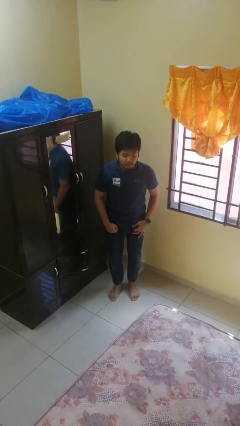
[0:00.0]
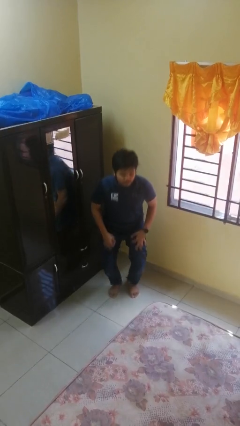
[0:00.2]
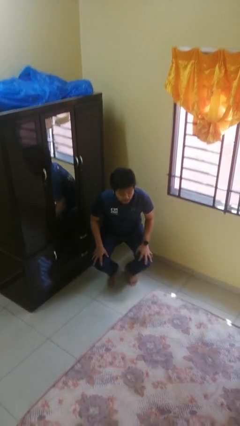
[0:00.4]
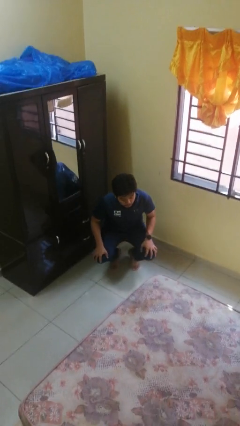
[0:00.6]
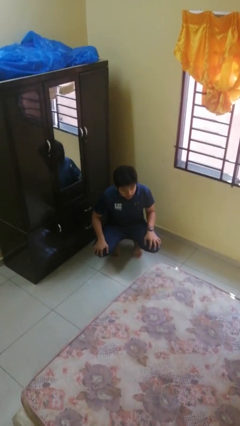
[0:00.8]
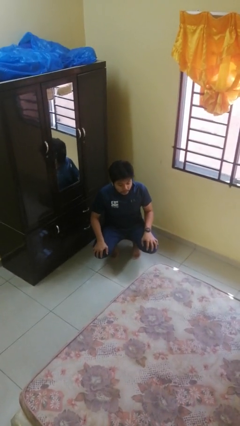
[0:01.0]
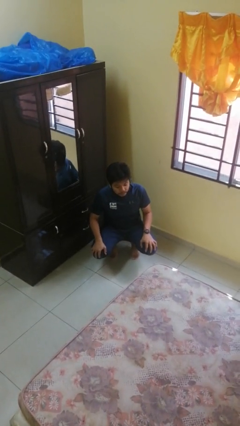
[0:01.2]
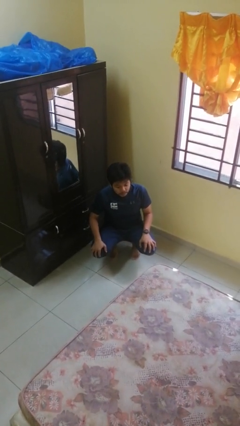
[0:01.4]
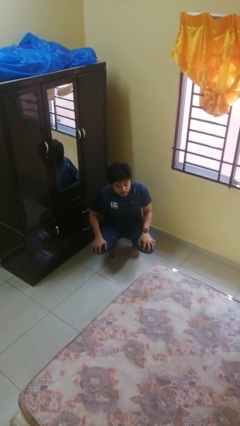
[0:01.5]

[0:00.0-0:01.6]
person squats

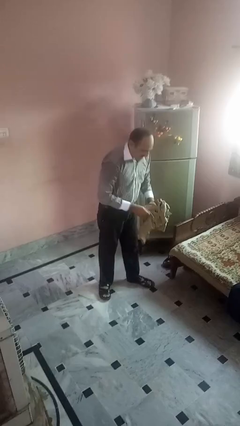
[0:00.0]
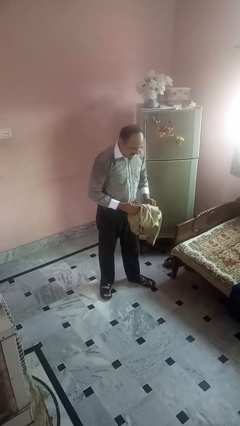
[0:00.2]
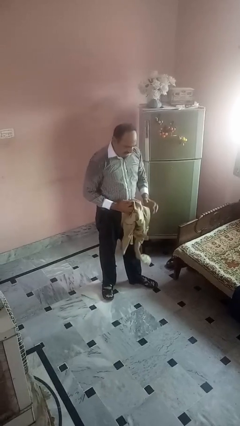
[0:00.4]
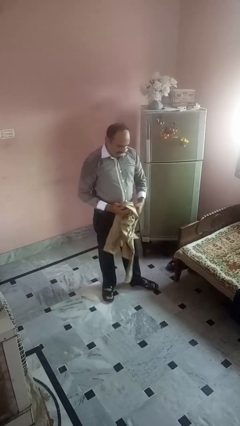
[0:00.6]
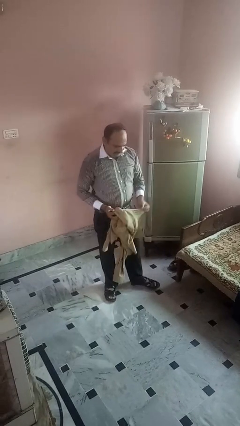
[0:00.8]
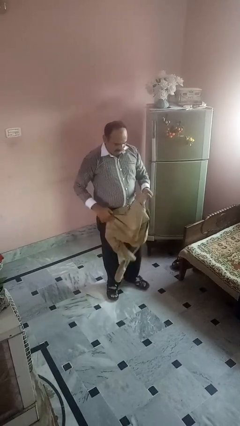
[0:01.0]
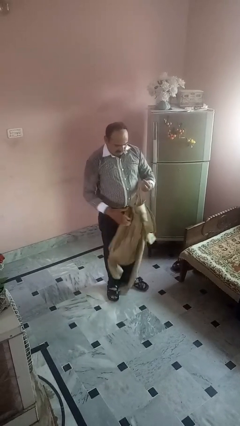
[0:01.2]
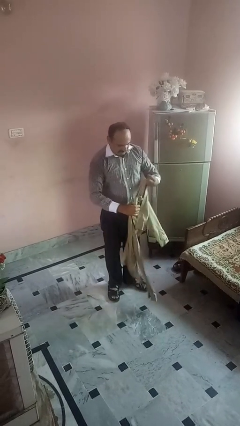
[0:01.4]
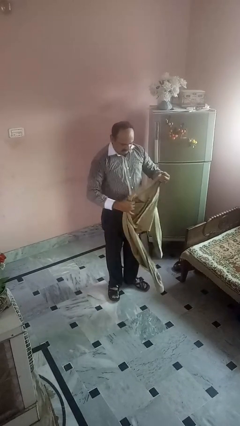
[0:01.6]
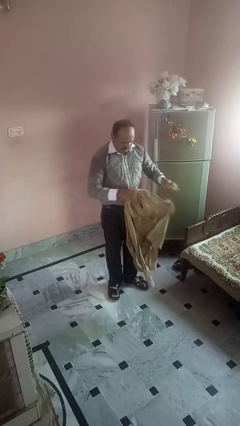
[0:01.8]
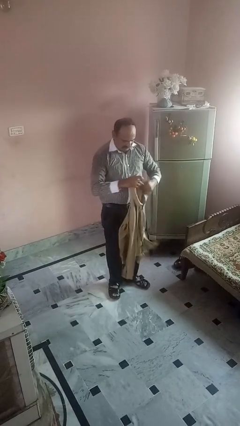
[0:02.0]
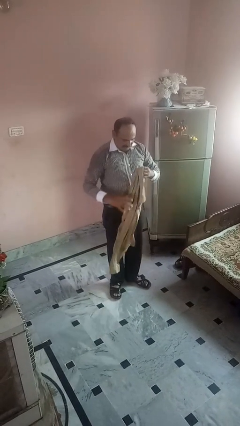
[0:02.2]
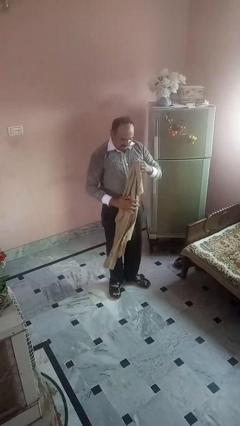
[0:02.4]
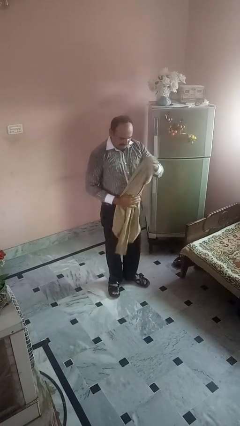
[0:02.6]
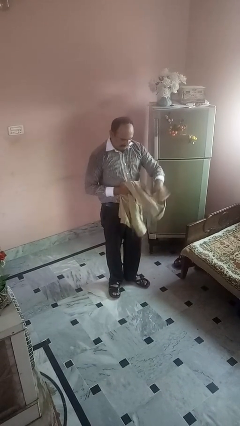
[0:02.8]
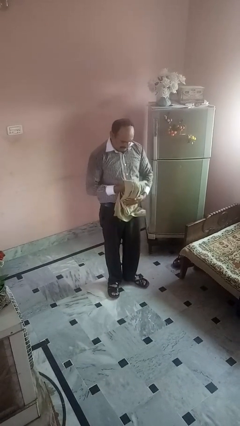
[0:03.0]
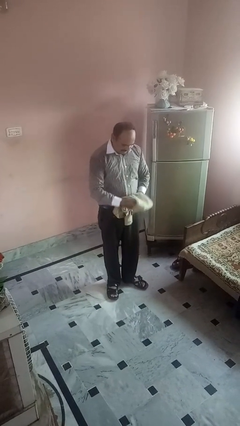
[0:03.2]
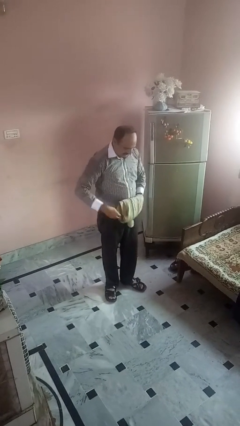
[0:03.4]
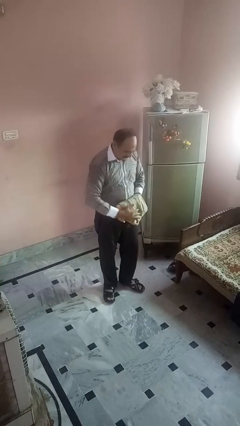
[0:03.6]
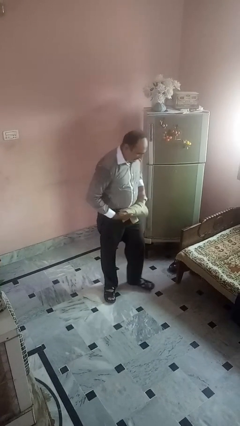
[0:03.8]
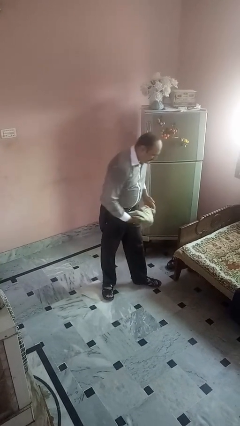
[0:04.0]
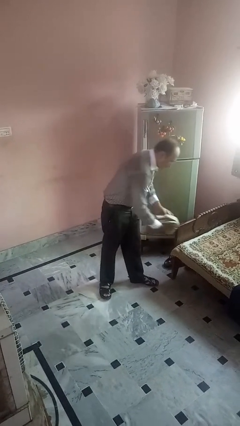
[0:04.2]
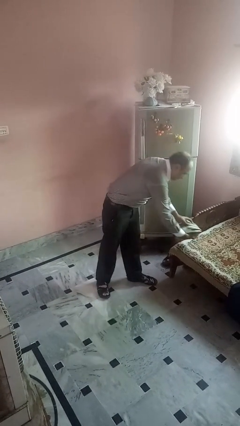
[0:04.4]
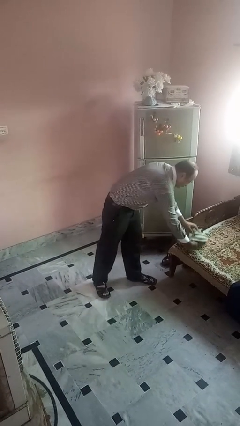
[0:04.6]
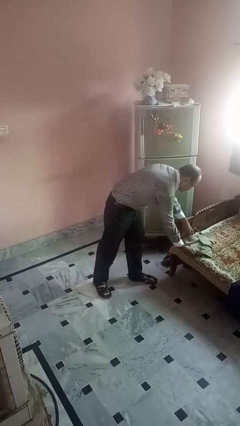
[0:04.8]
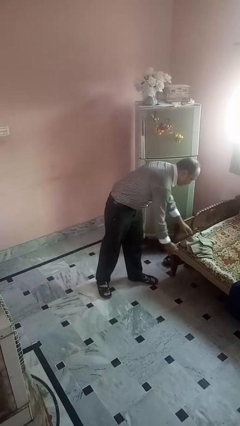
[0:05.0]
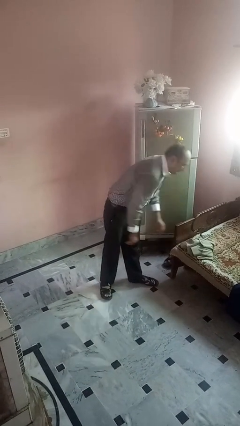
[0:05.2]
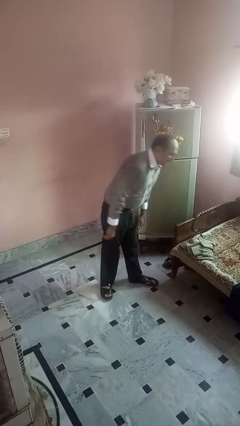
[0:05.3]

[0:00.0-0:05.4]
person folds shirt

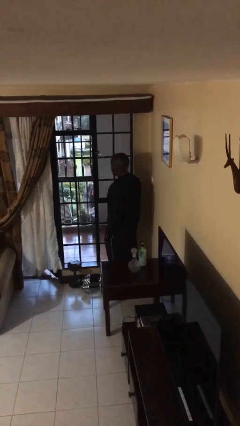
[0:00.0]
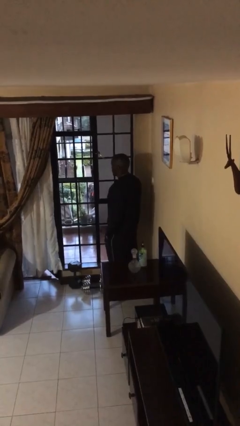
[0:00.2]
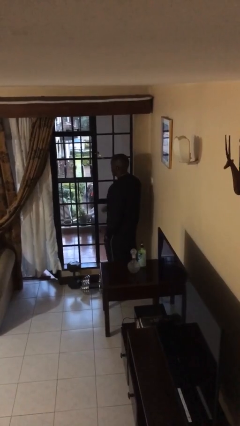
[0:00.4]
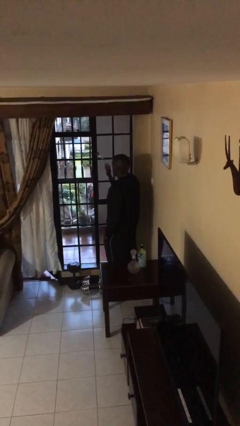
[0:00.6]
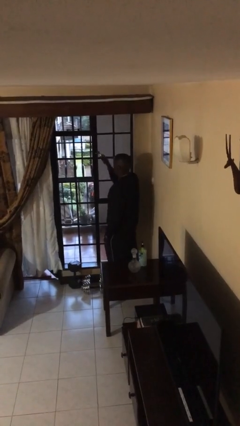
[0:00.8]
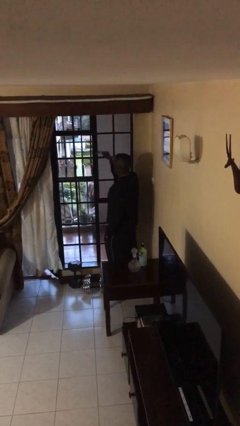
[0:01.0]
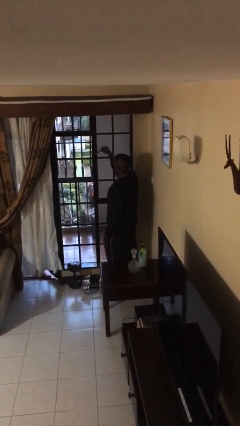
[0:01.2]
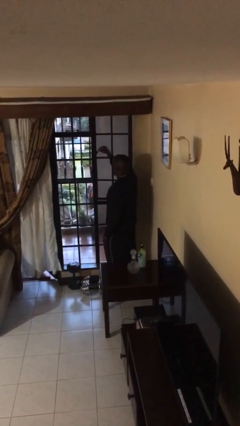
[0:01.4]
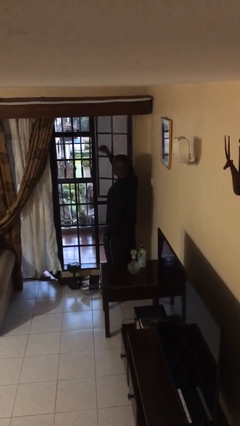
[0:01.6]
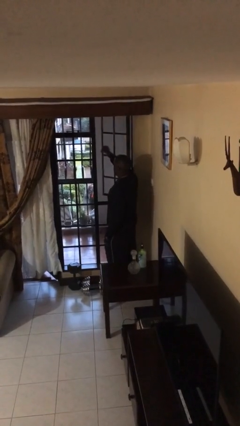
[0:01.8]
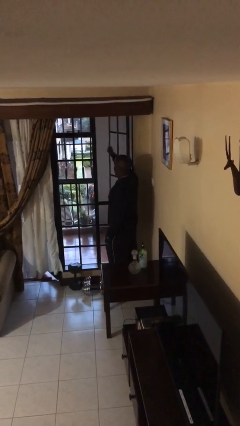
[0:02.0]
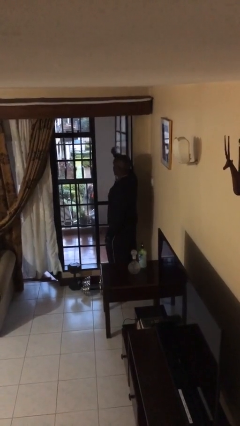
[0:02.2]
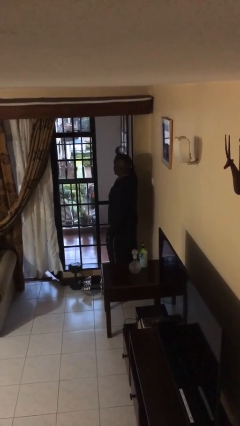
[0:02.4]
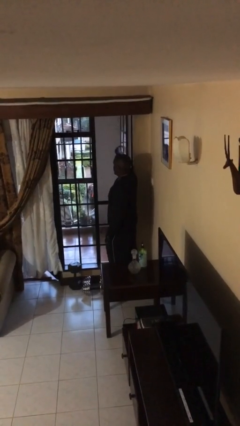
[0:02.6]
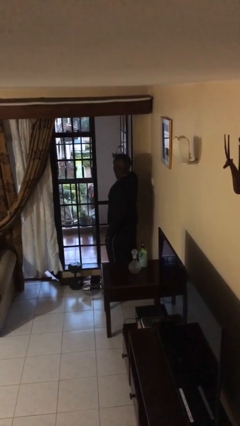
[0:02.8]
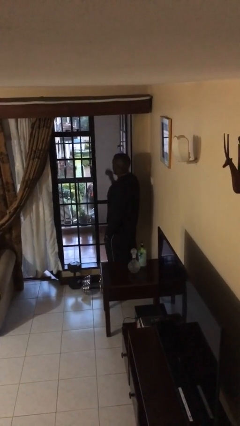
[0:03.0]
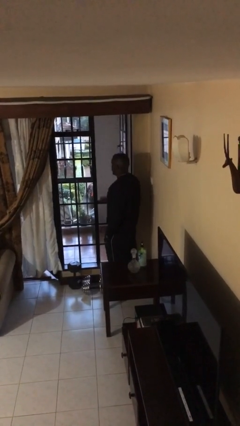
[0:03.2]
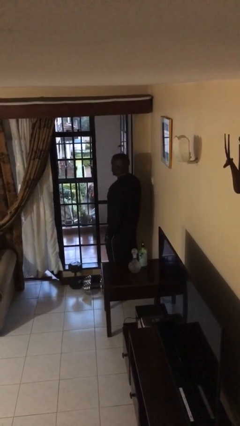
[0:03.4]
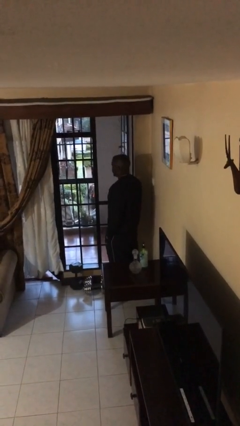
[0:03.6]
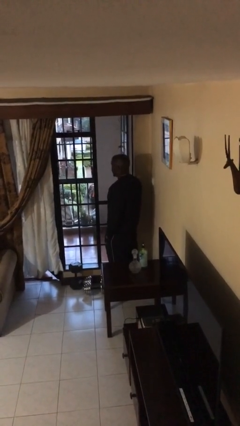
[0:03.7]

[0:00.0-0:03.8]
person opens home window

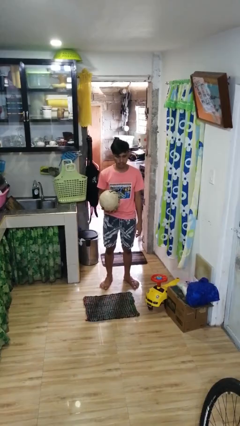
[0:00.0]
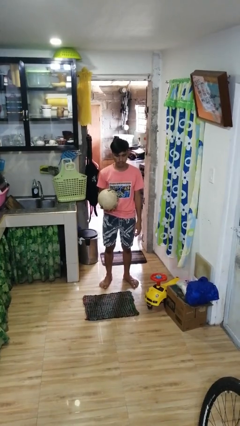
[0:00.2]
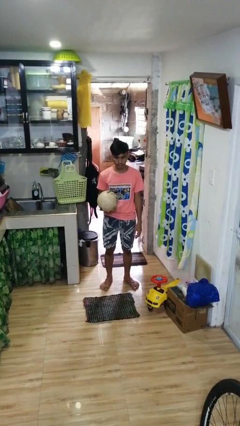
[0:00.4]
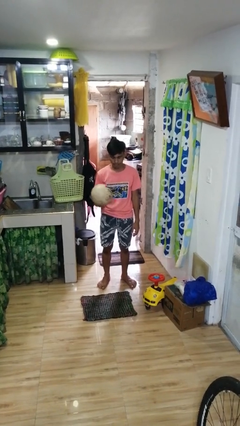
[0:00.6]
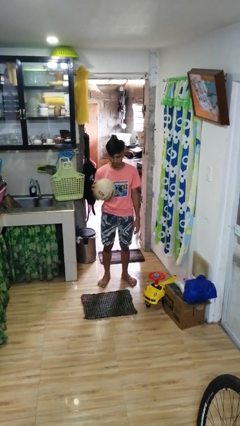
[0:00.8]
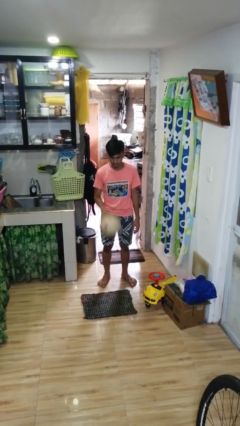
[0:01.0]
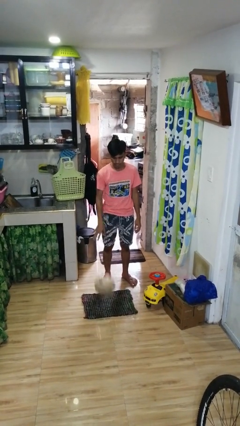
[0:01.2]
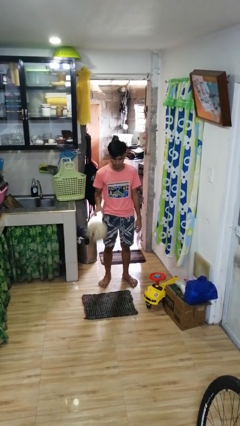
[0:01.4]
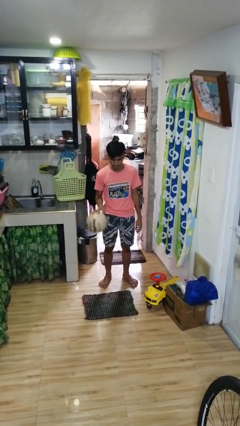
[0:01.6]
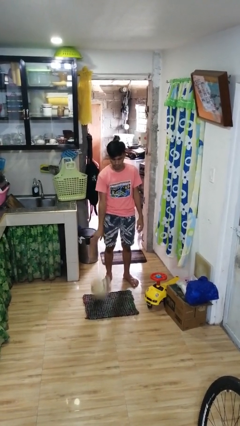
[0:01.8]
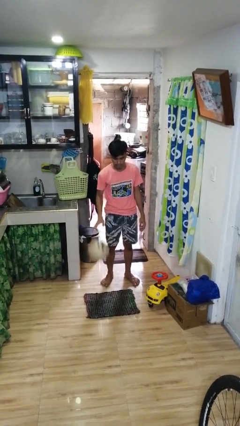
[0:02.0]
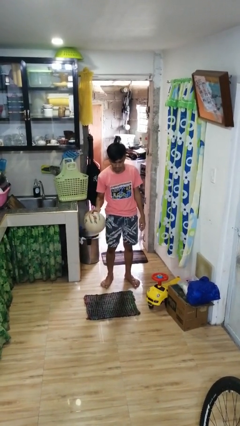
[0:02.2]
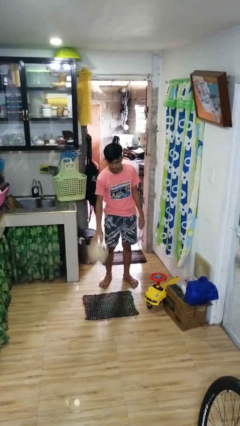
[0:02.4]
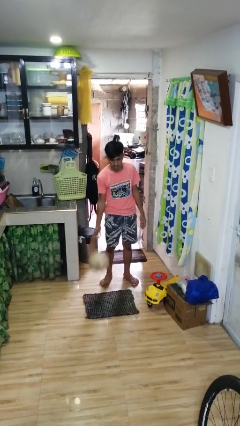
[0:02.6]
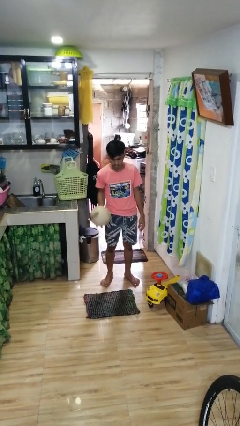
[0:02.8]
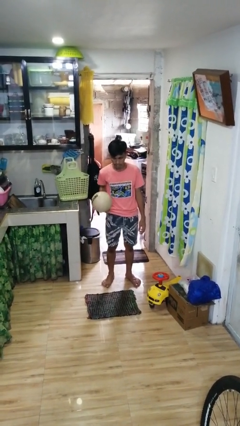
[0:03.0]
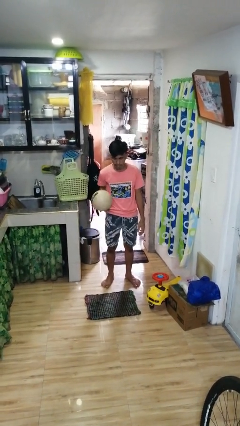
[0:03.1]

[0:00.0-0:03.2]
person bounces ball on floor

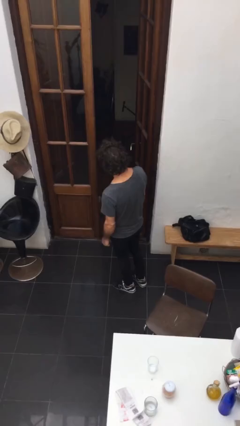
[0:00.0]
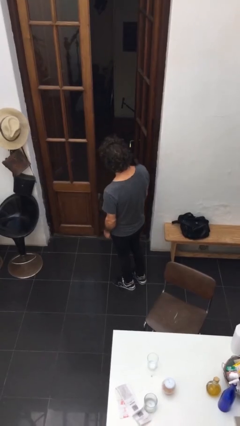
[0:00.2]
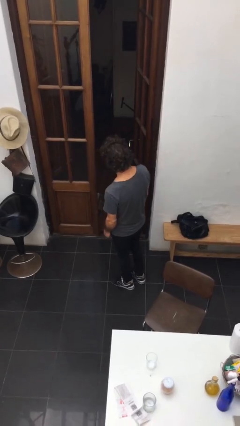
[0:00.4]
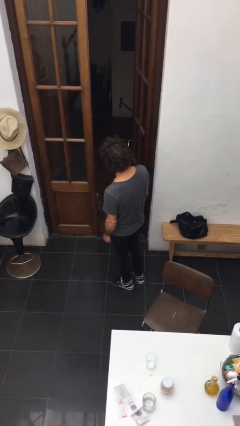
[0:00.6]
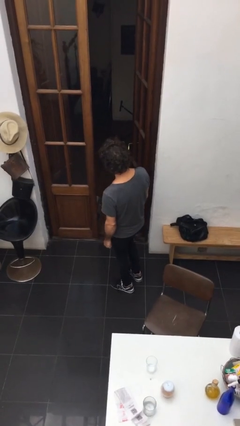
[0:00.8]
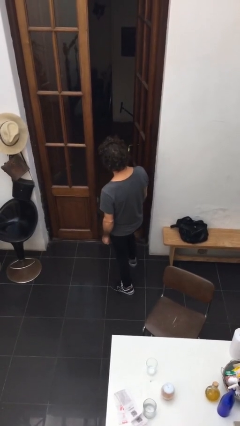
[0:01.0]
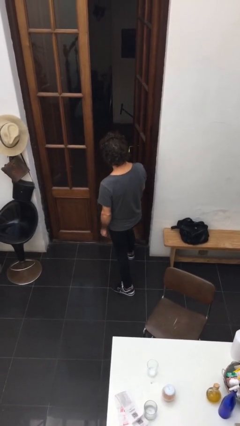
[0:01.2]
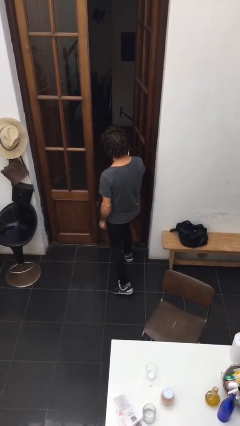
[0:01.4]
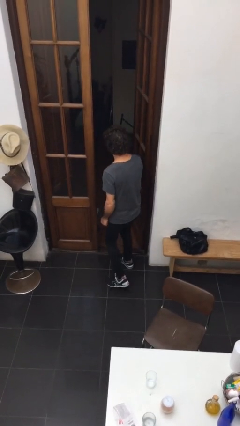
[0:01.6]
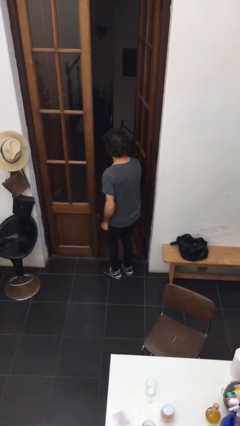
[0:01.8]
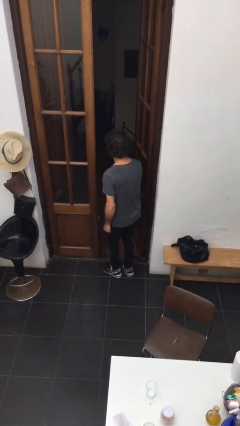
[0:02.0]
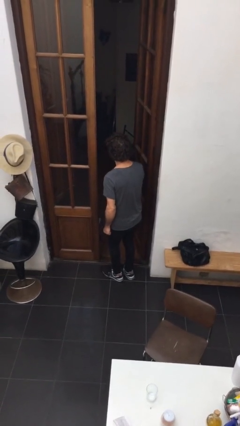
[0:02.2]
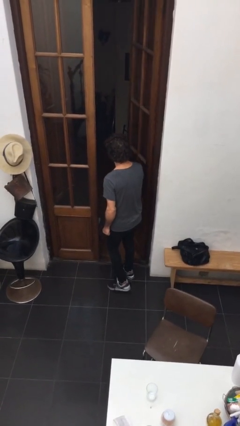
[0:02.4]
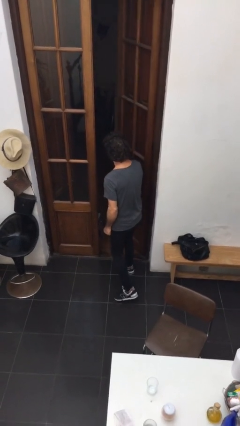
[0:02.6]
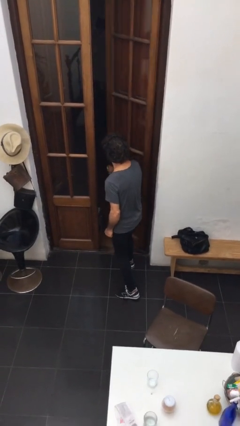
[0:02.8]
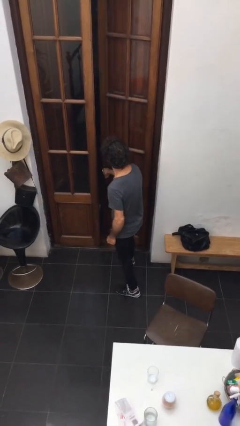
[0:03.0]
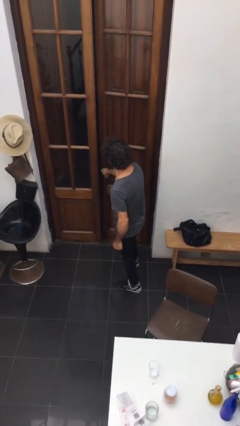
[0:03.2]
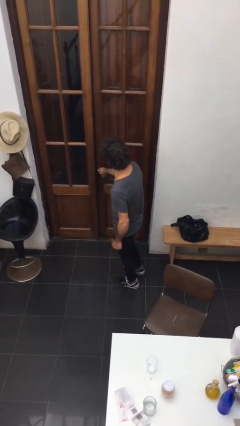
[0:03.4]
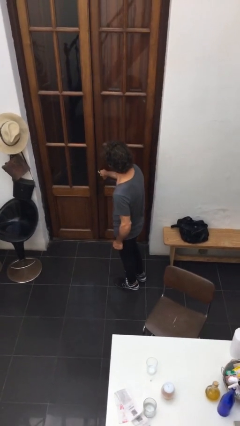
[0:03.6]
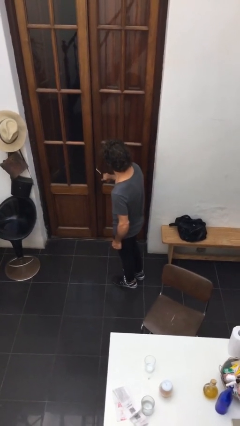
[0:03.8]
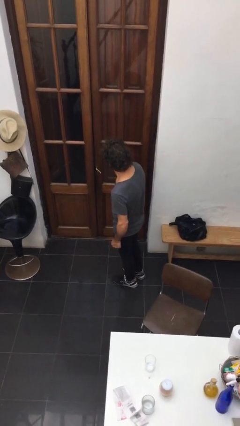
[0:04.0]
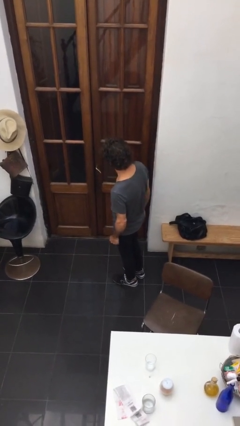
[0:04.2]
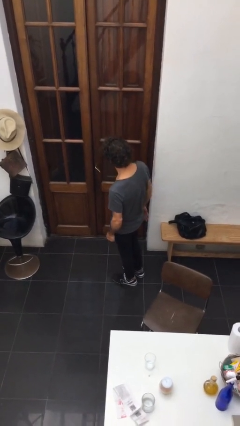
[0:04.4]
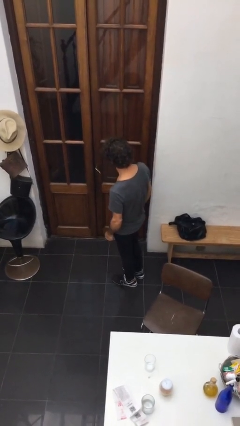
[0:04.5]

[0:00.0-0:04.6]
person closes facility door
